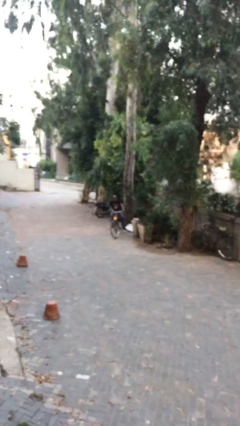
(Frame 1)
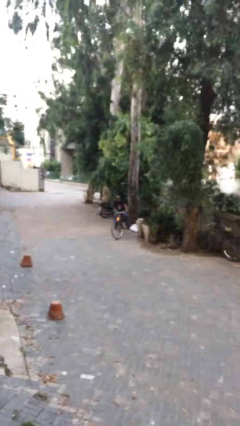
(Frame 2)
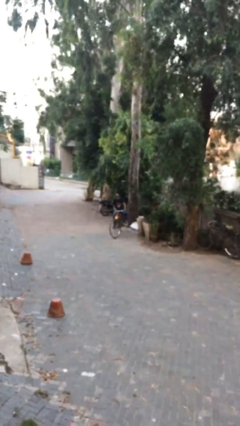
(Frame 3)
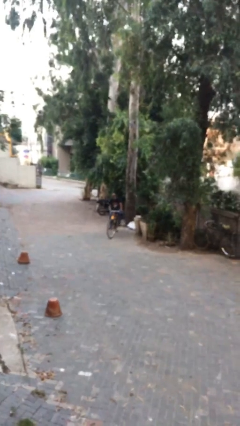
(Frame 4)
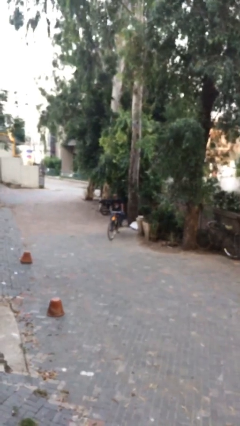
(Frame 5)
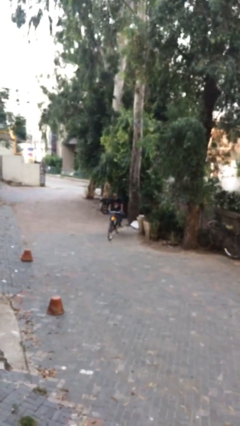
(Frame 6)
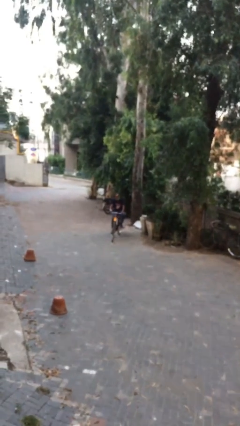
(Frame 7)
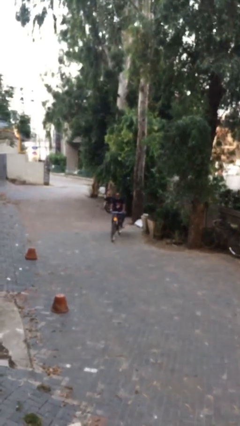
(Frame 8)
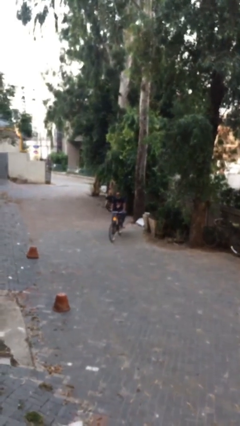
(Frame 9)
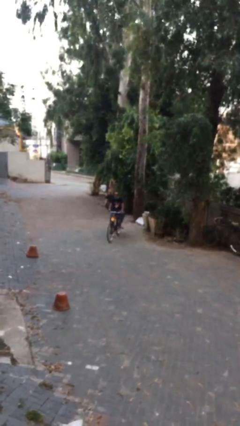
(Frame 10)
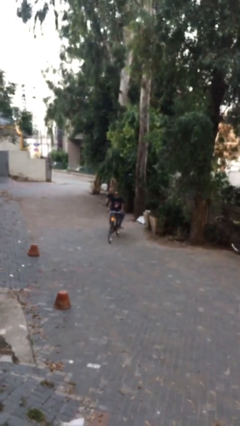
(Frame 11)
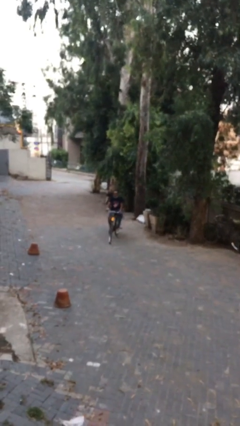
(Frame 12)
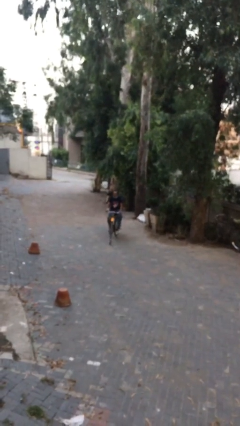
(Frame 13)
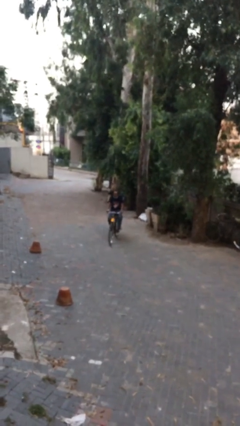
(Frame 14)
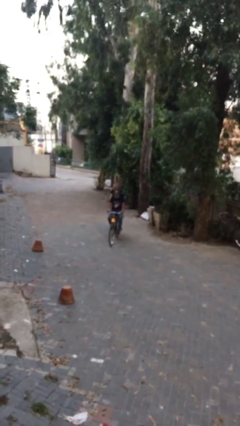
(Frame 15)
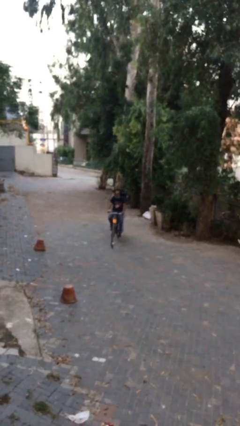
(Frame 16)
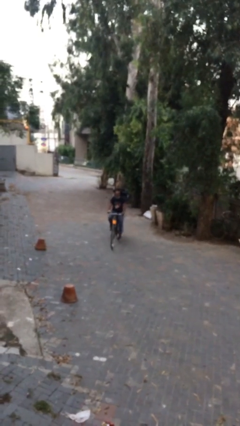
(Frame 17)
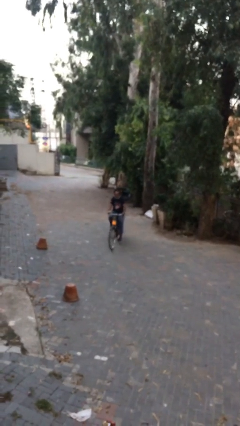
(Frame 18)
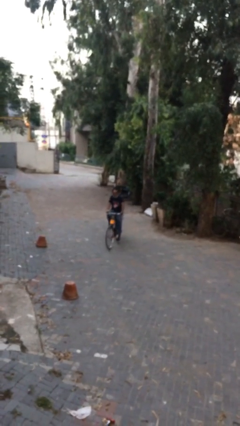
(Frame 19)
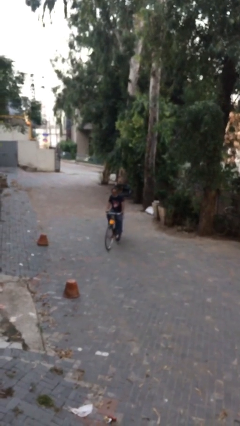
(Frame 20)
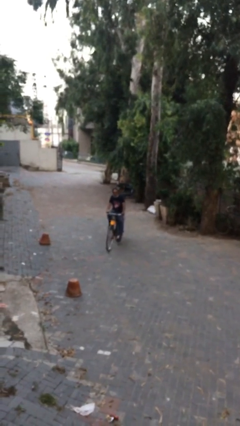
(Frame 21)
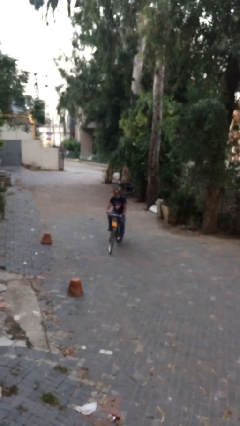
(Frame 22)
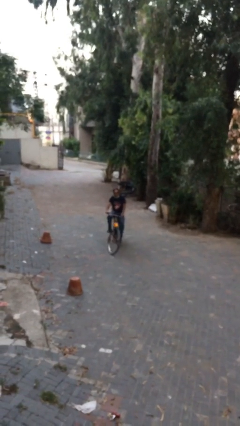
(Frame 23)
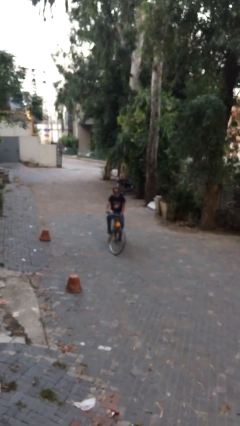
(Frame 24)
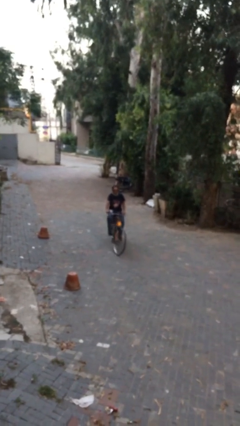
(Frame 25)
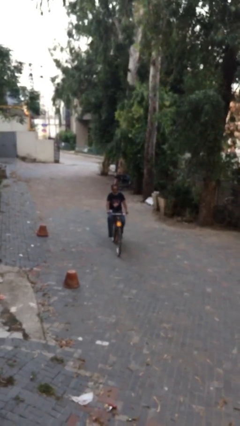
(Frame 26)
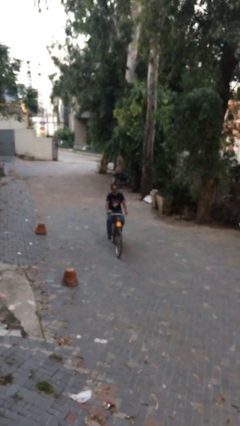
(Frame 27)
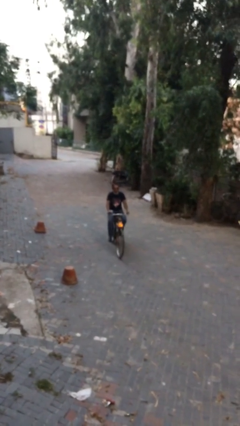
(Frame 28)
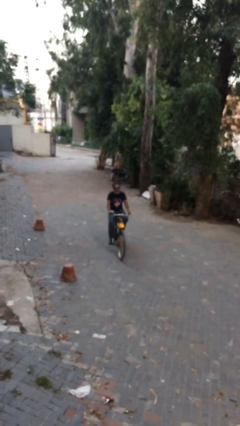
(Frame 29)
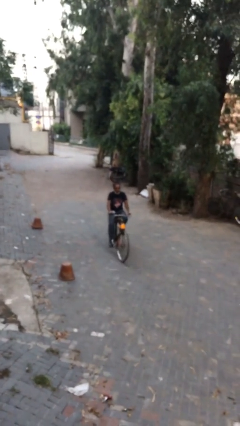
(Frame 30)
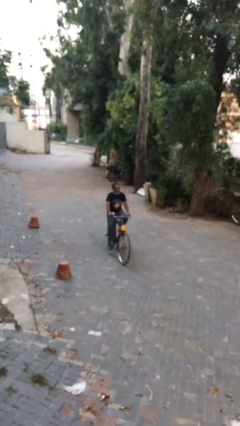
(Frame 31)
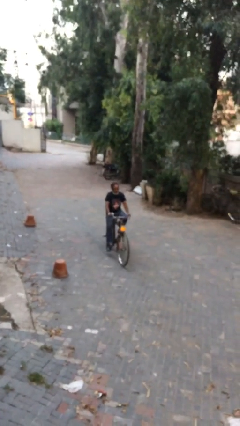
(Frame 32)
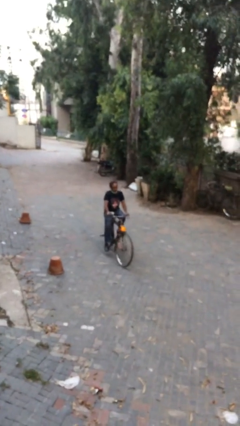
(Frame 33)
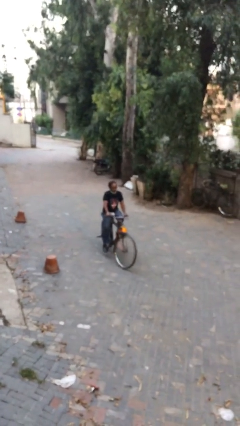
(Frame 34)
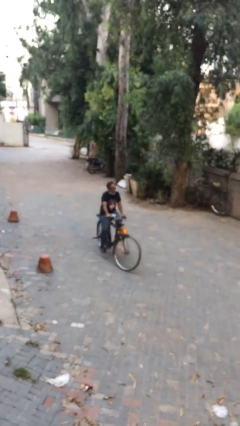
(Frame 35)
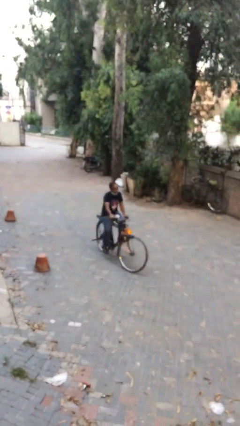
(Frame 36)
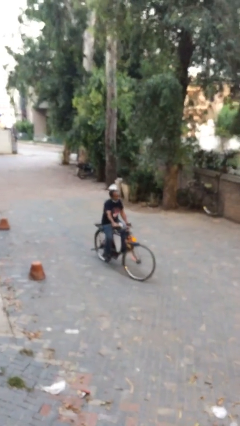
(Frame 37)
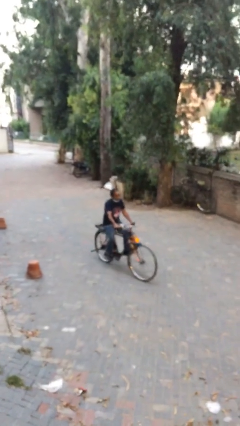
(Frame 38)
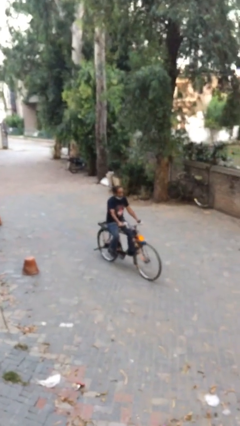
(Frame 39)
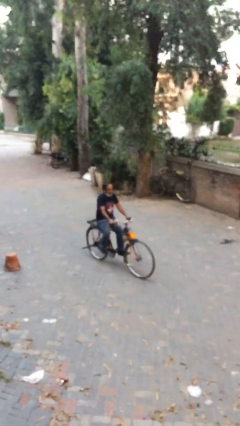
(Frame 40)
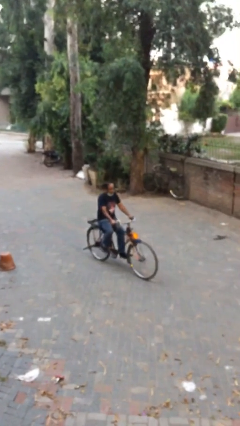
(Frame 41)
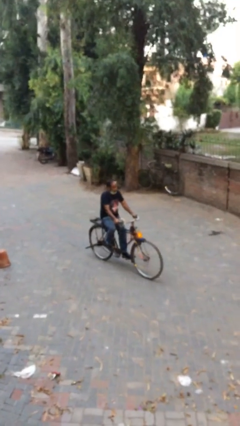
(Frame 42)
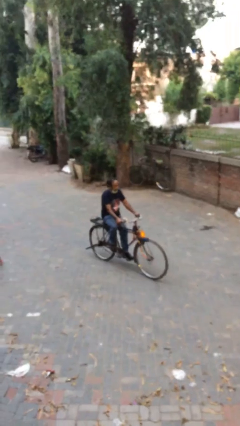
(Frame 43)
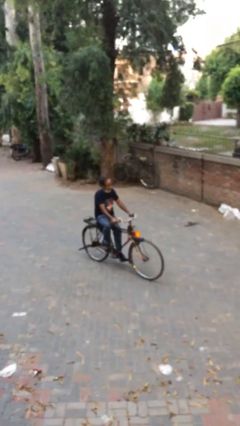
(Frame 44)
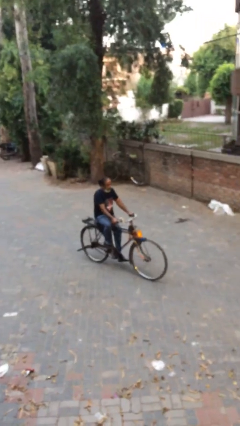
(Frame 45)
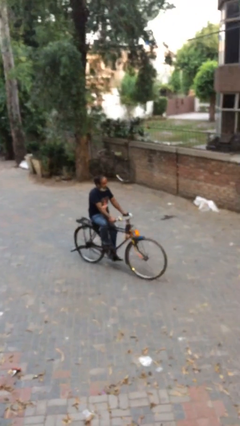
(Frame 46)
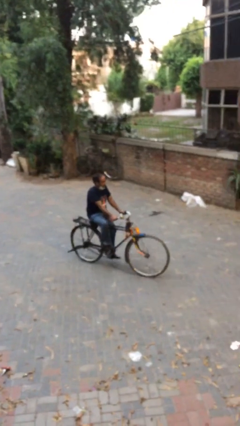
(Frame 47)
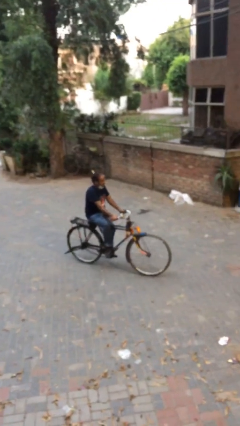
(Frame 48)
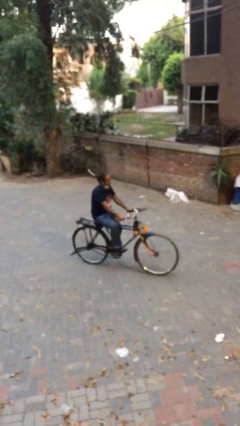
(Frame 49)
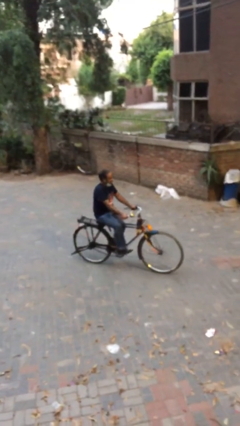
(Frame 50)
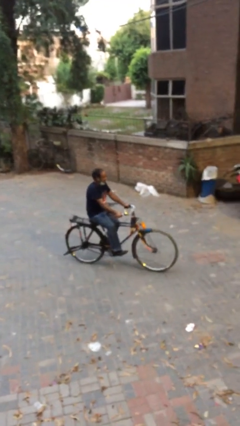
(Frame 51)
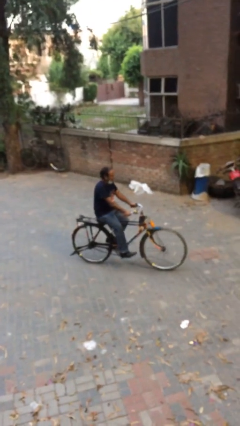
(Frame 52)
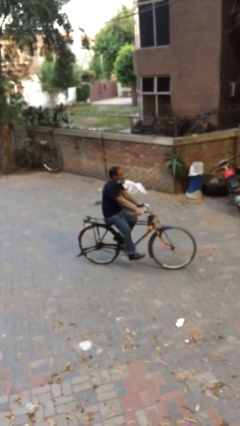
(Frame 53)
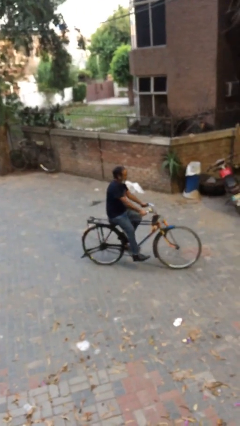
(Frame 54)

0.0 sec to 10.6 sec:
person rides bicycle

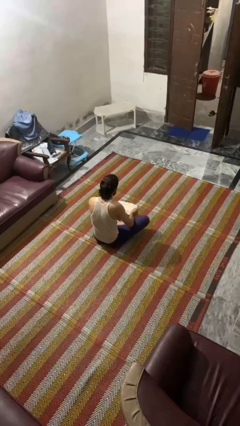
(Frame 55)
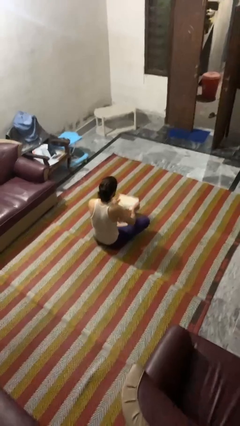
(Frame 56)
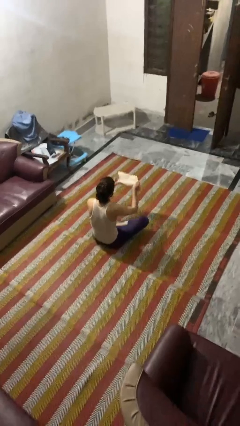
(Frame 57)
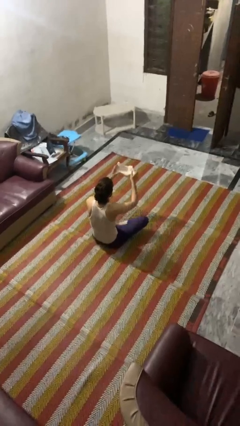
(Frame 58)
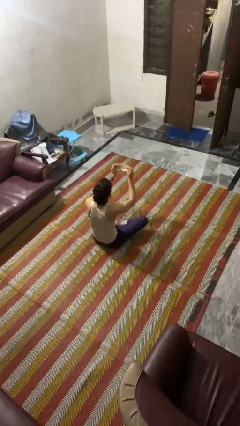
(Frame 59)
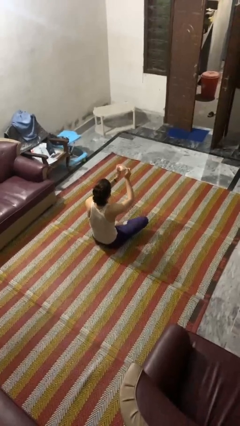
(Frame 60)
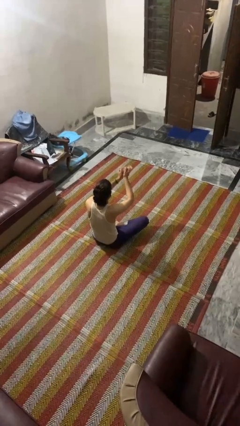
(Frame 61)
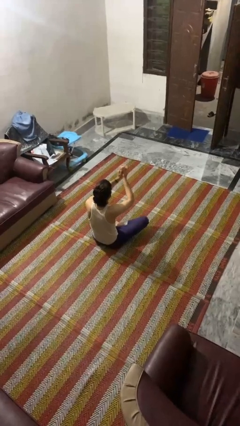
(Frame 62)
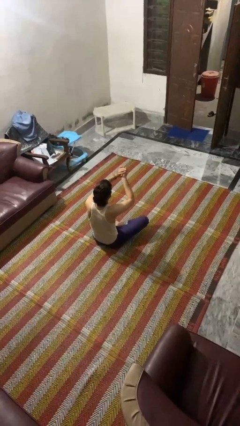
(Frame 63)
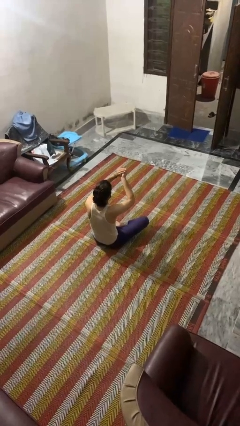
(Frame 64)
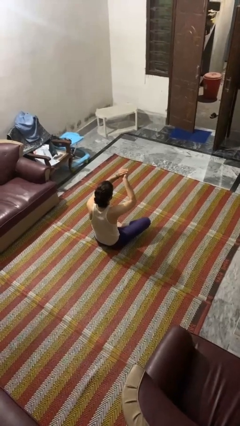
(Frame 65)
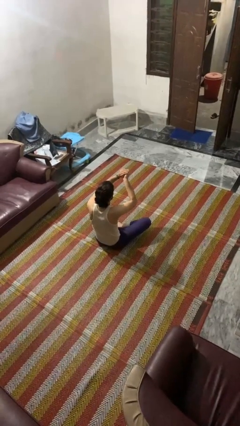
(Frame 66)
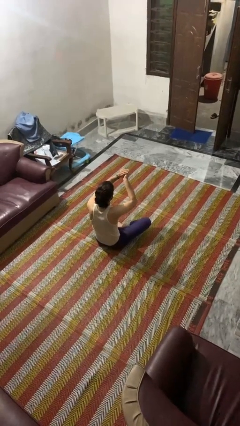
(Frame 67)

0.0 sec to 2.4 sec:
person crumples paper

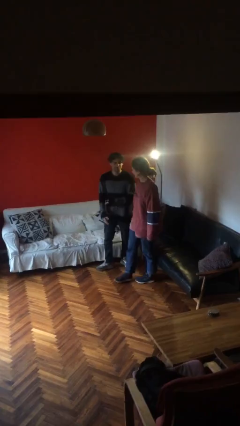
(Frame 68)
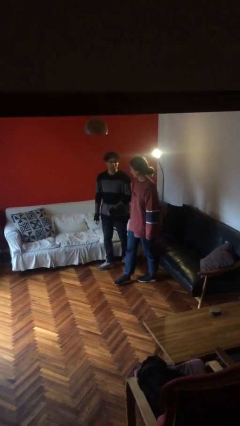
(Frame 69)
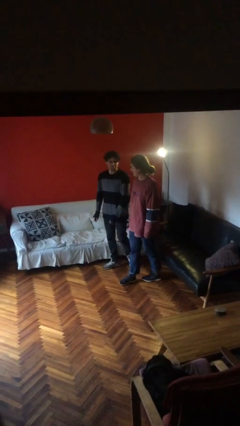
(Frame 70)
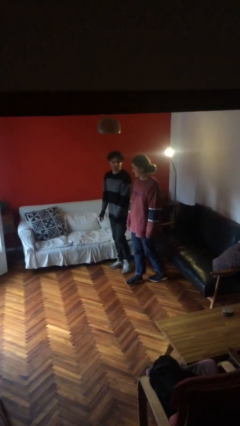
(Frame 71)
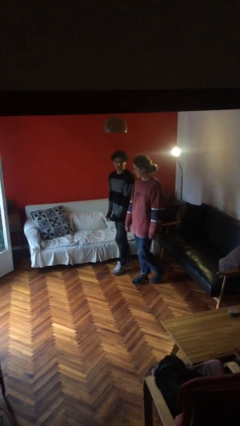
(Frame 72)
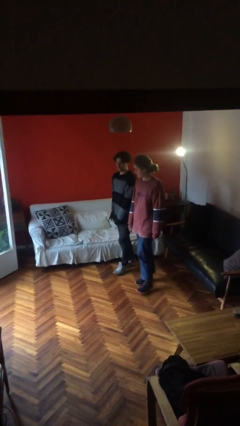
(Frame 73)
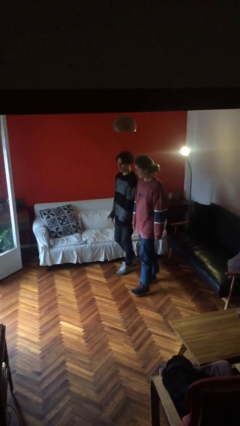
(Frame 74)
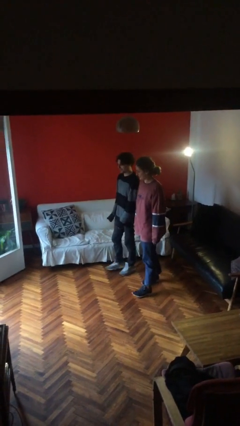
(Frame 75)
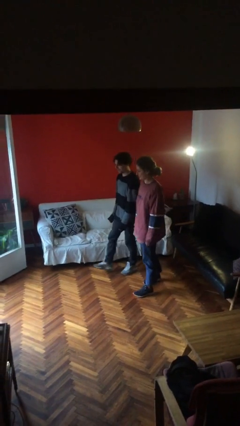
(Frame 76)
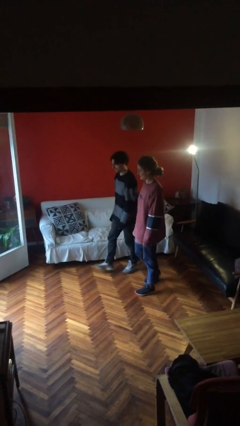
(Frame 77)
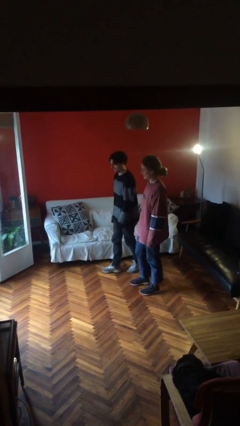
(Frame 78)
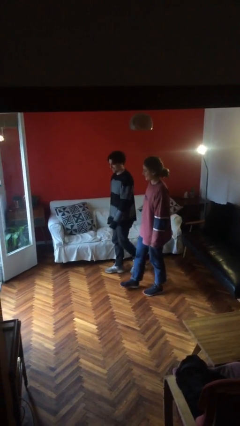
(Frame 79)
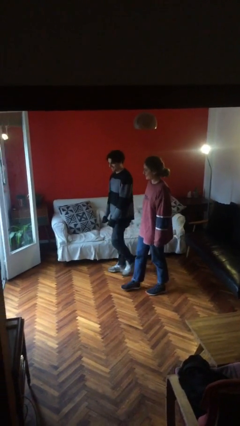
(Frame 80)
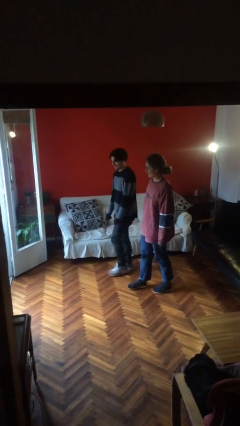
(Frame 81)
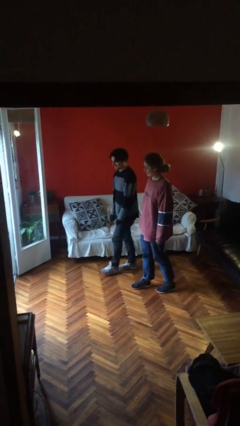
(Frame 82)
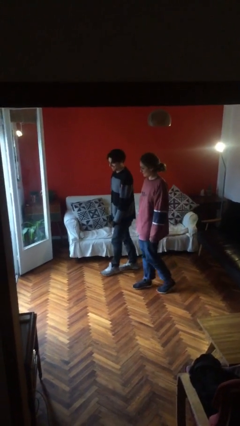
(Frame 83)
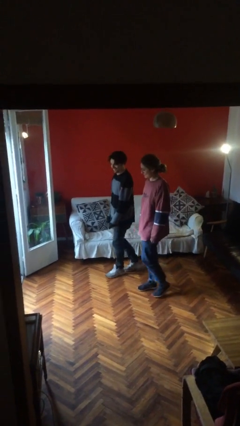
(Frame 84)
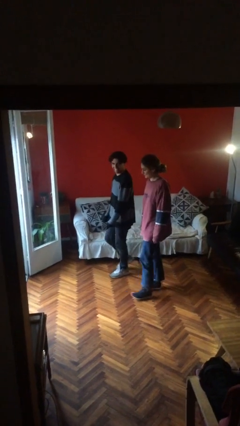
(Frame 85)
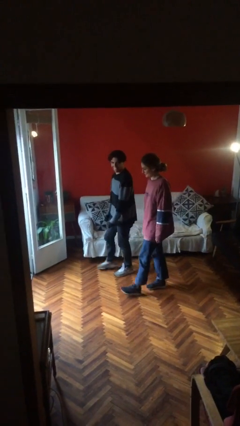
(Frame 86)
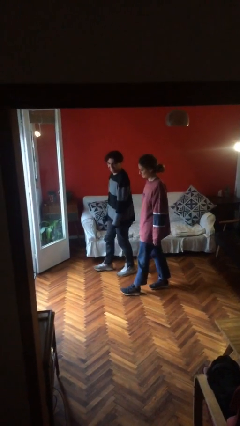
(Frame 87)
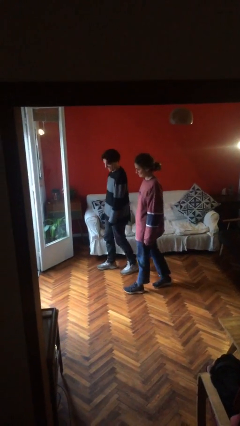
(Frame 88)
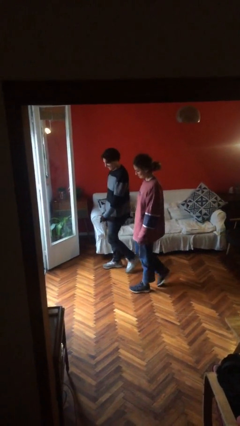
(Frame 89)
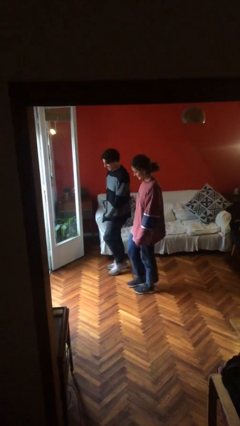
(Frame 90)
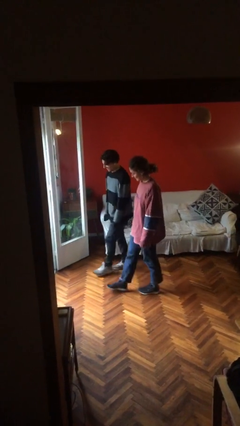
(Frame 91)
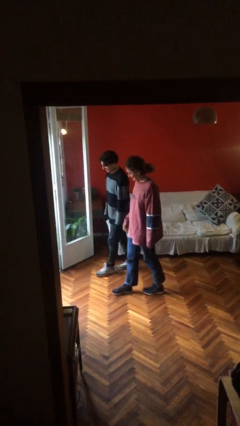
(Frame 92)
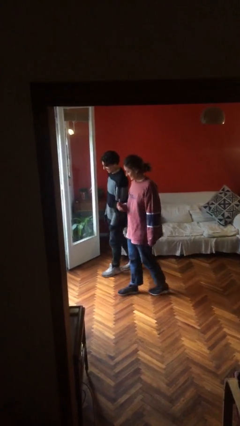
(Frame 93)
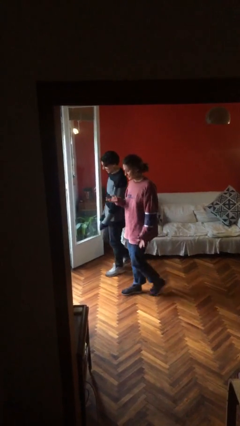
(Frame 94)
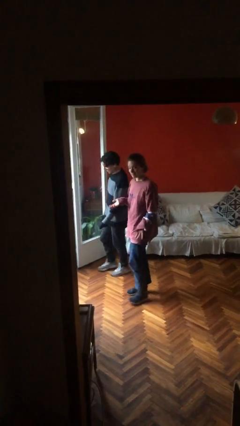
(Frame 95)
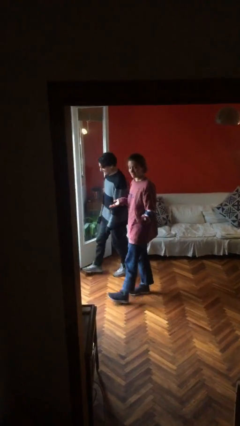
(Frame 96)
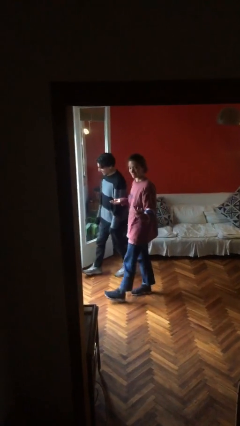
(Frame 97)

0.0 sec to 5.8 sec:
person talks to person
